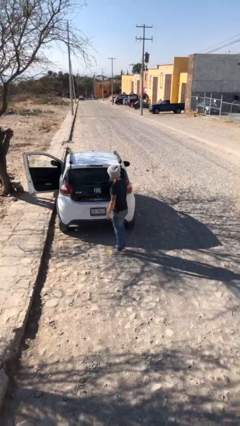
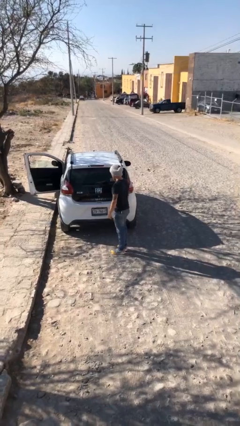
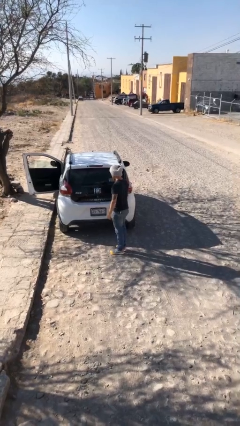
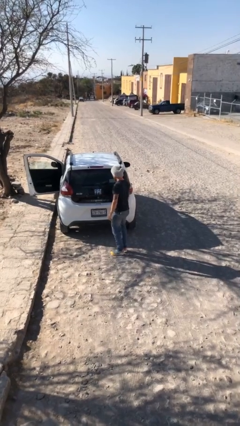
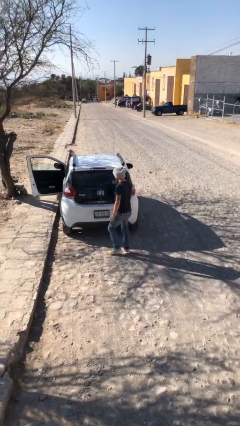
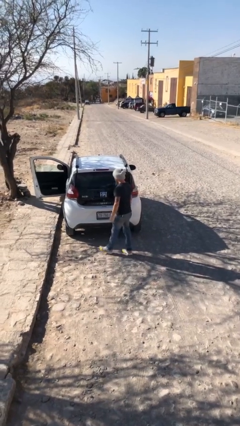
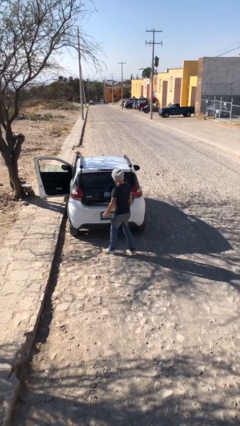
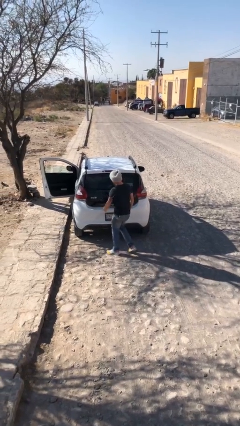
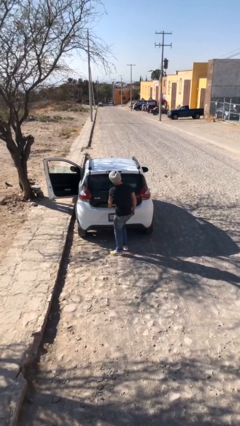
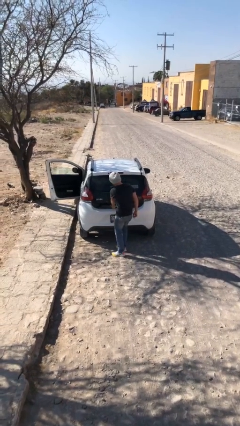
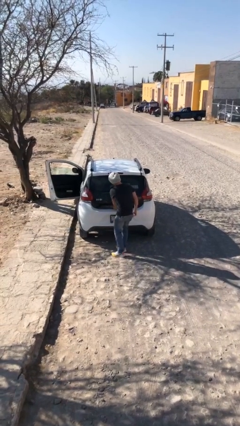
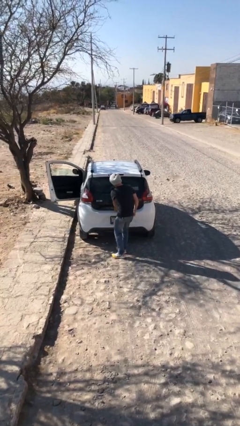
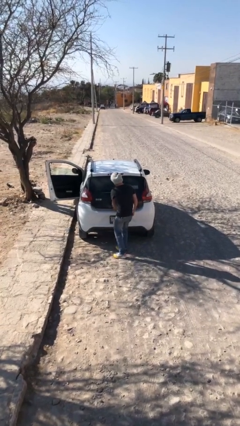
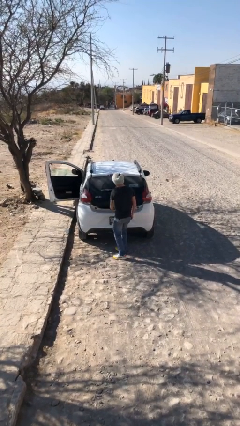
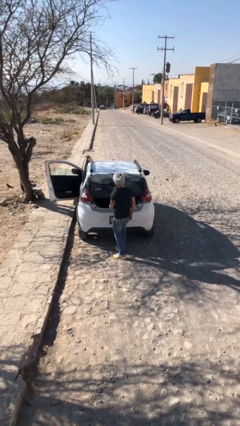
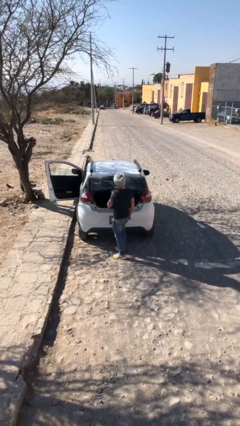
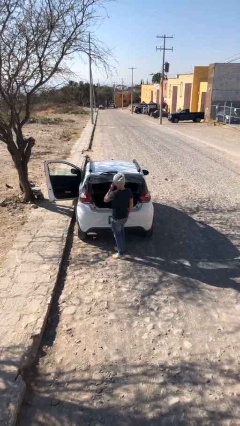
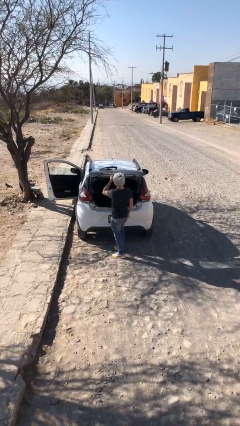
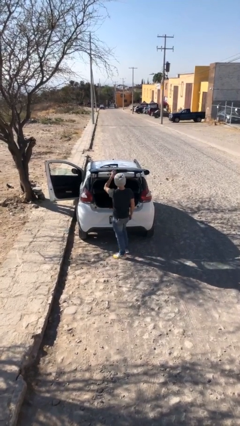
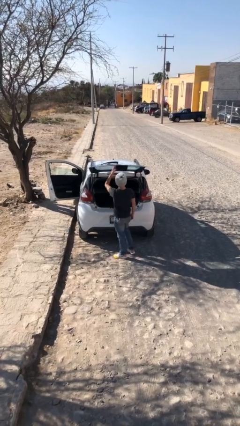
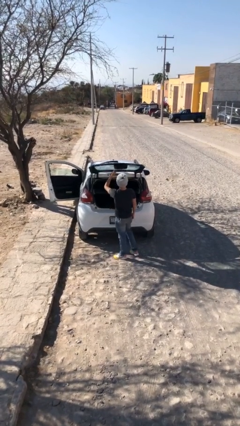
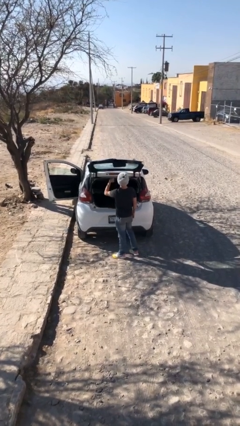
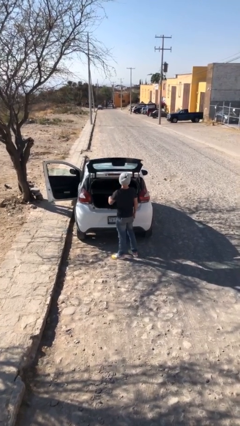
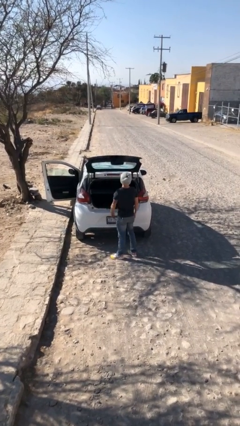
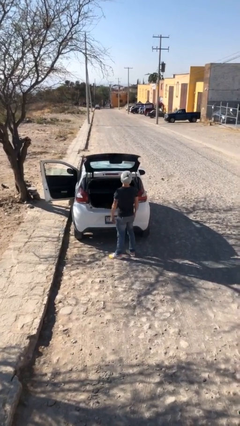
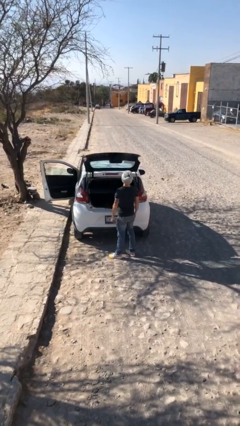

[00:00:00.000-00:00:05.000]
person opens car trunk

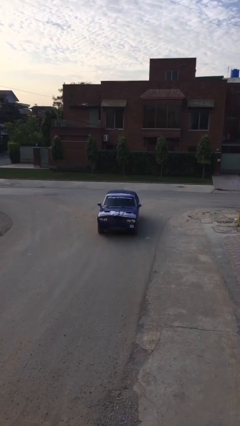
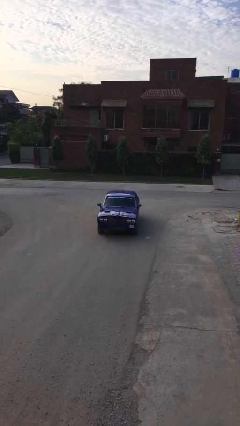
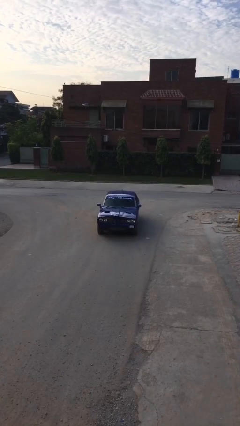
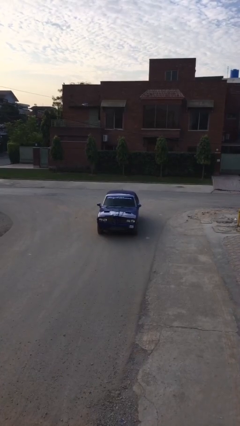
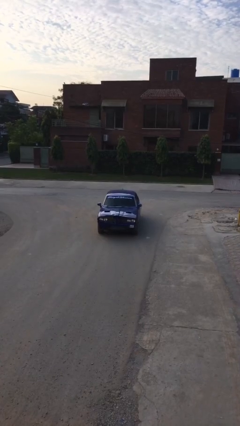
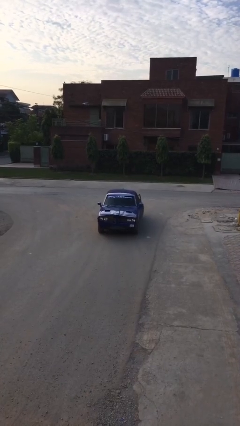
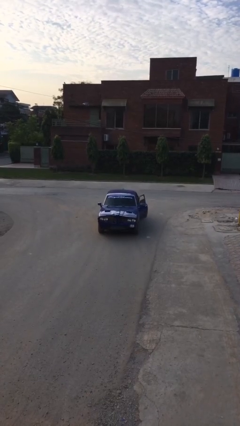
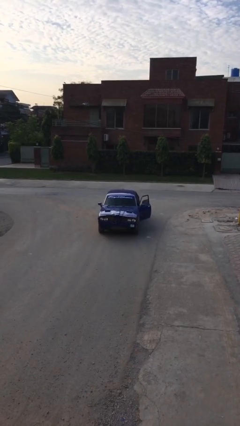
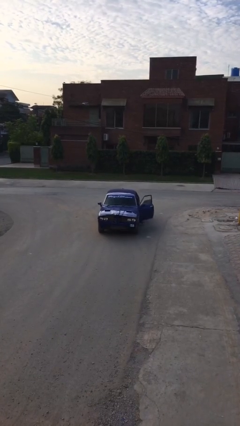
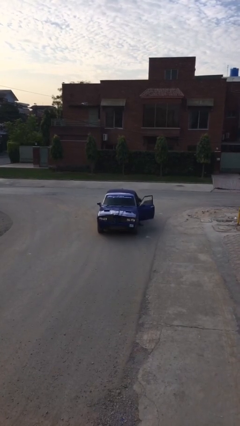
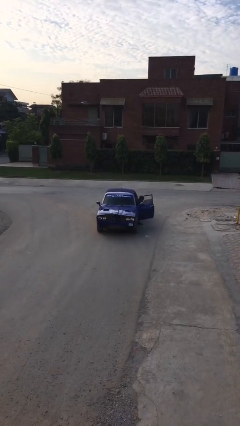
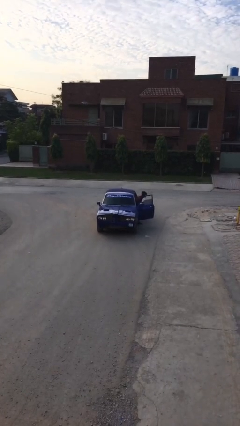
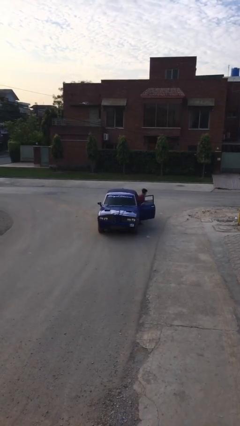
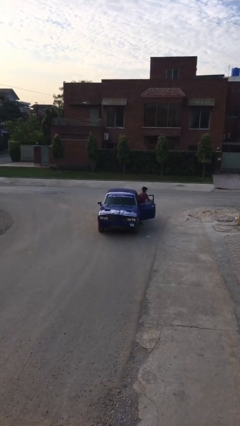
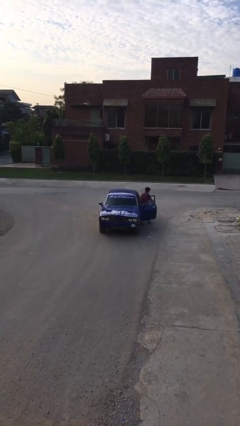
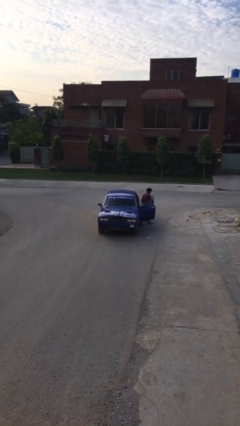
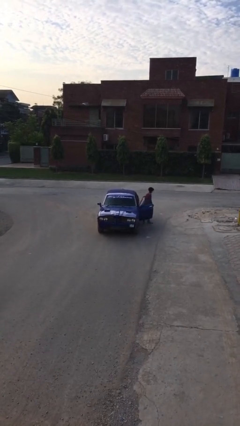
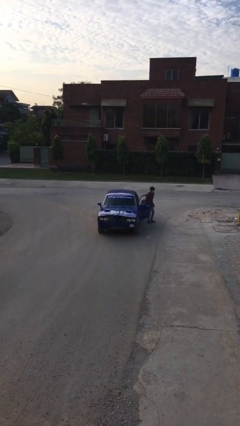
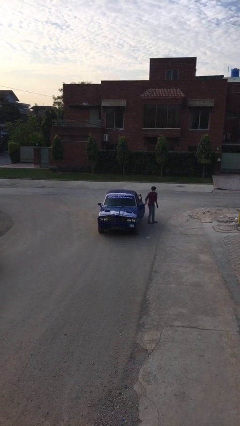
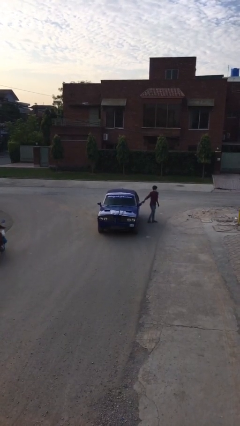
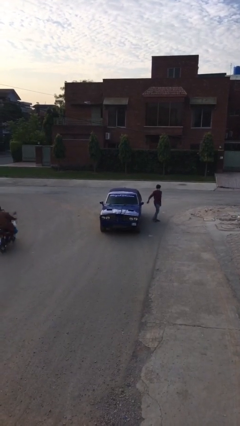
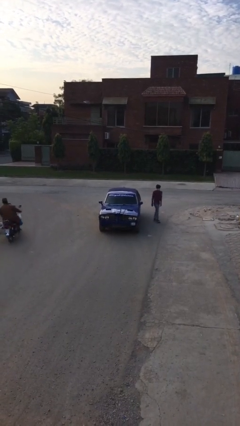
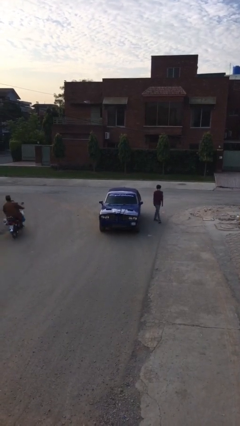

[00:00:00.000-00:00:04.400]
car drops off person

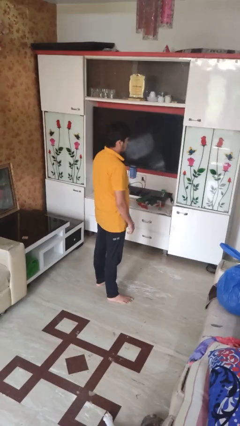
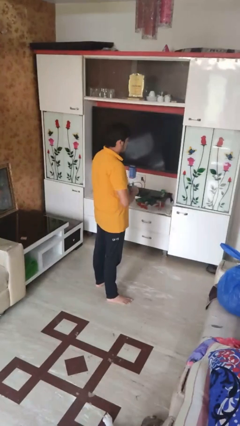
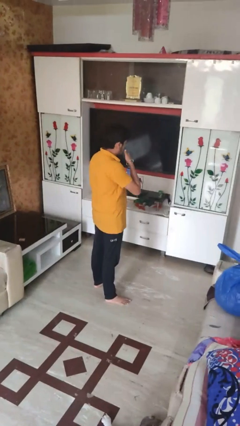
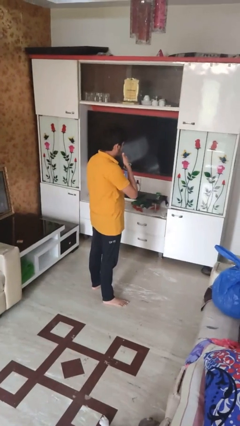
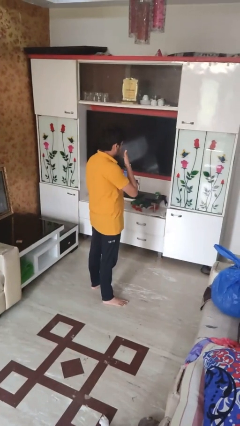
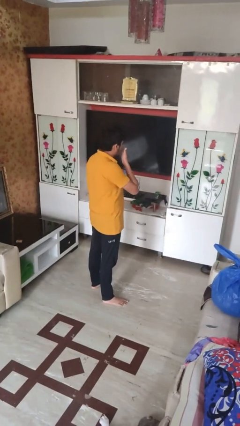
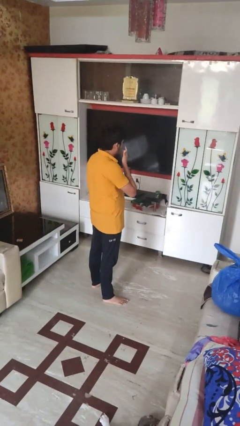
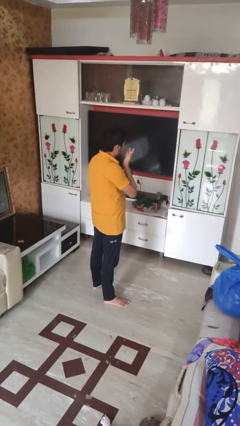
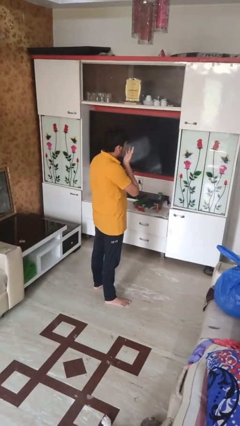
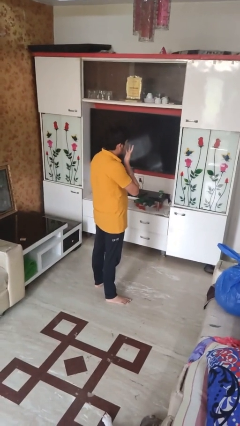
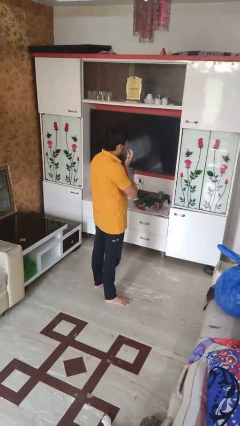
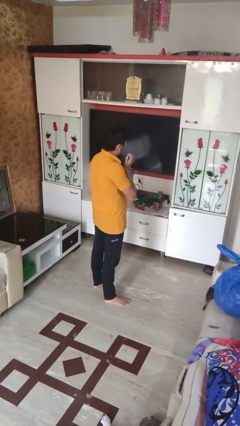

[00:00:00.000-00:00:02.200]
person licks fingers

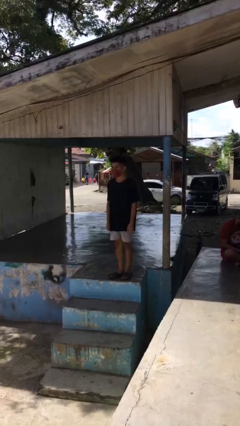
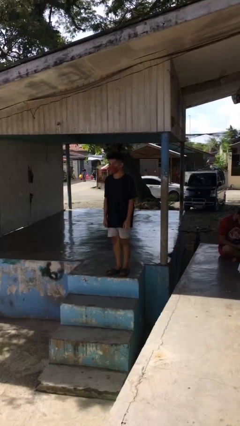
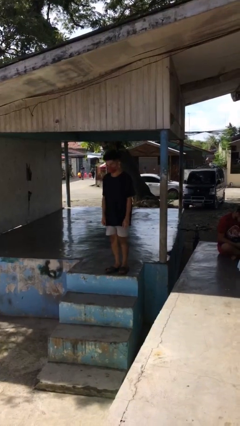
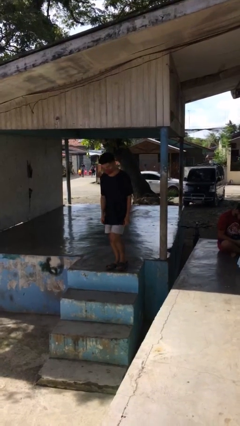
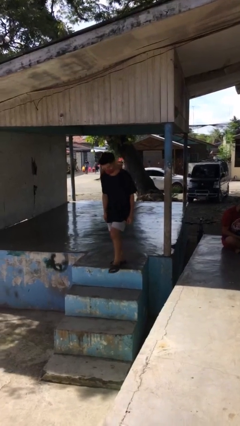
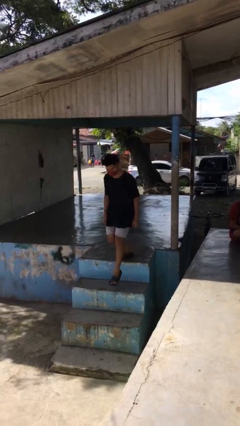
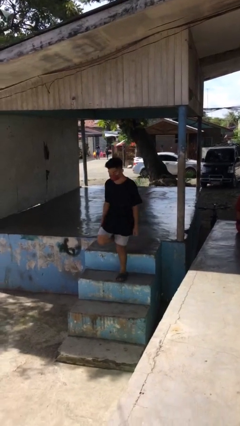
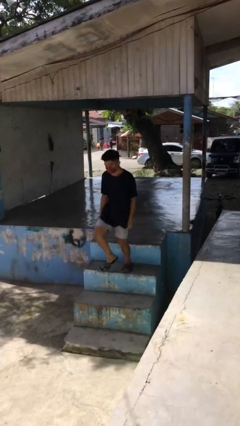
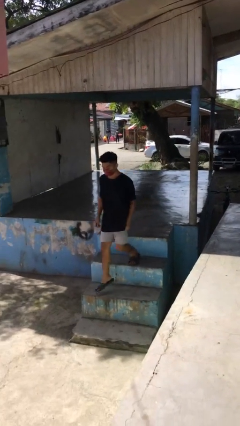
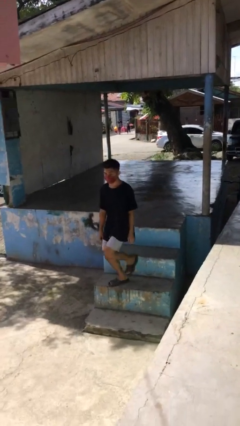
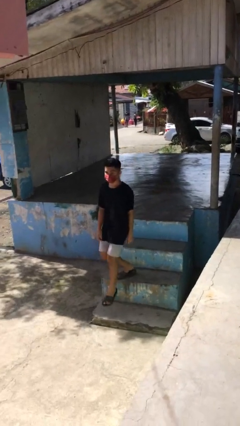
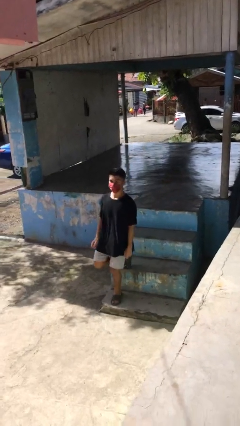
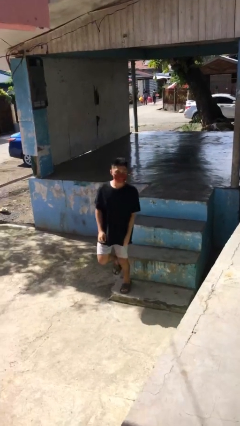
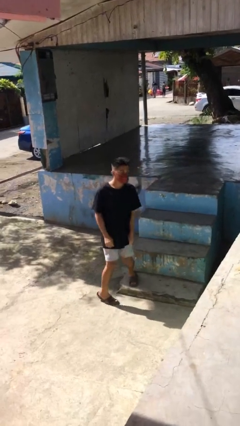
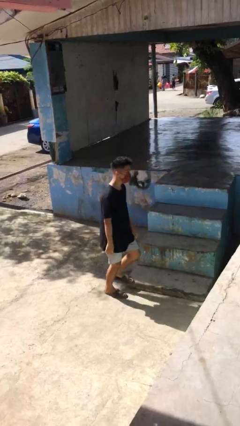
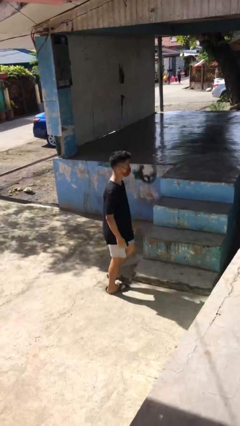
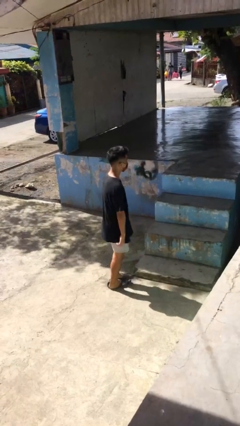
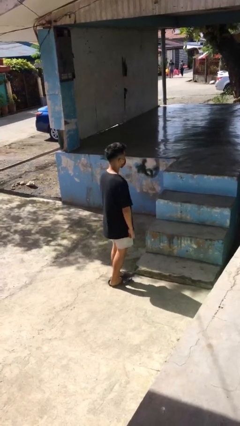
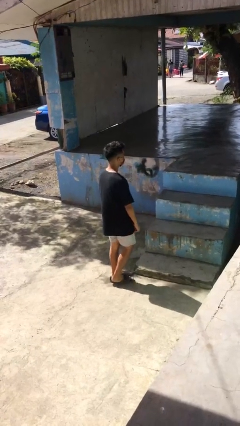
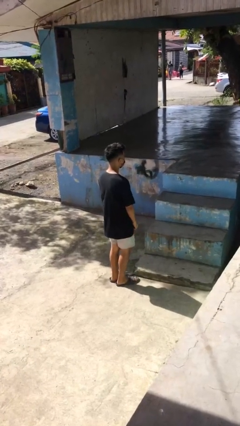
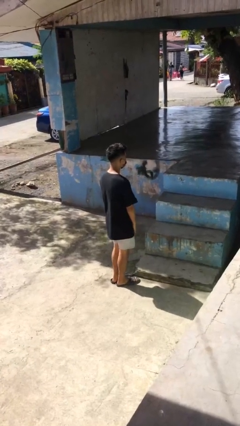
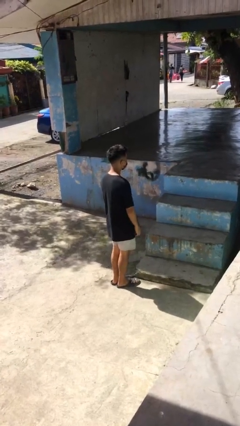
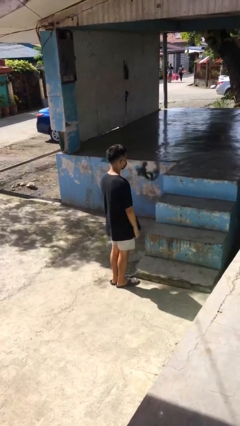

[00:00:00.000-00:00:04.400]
person climbs down stairs

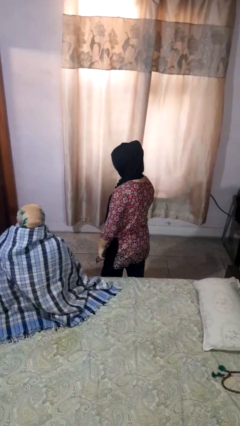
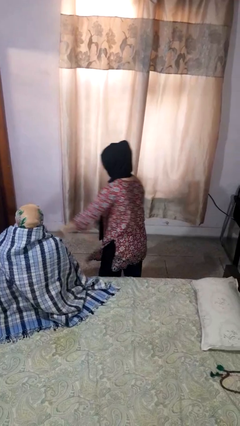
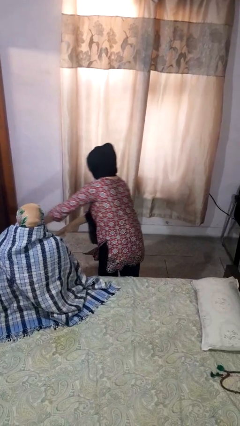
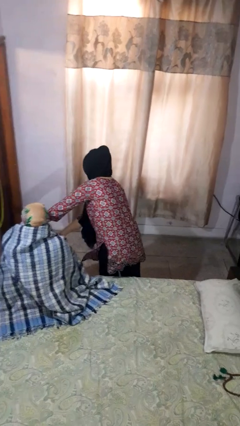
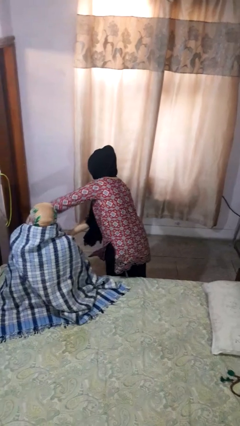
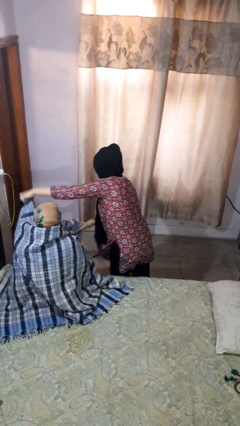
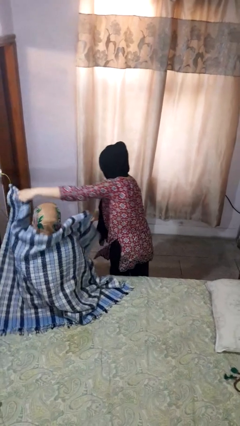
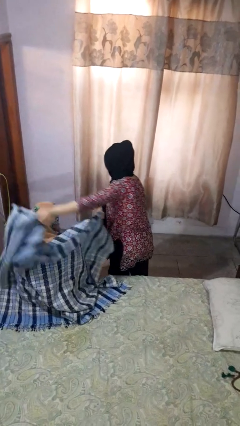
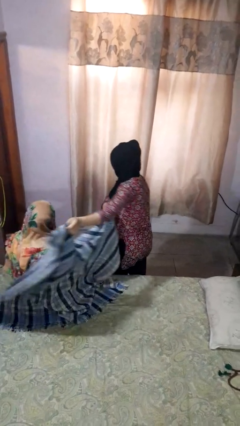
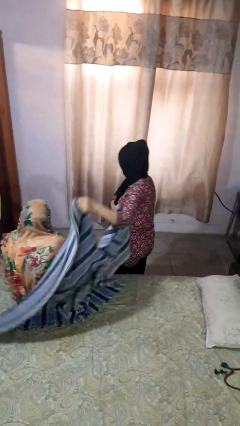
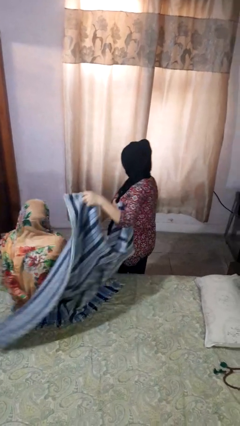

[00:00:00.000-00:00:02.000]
person uncovers friend with blanket
